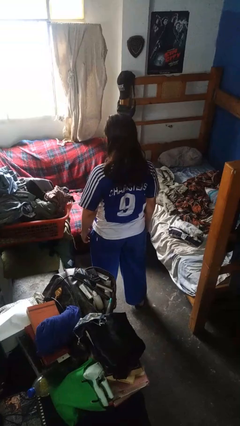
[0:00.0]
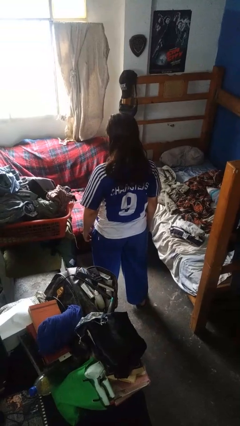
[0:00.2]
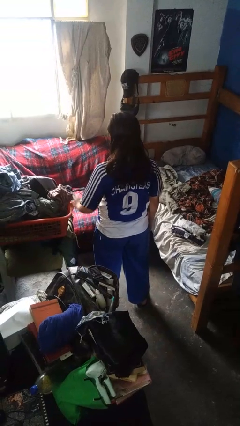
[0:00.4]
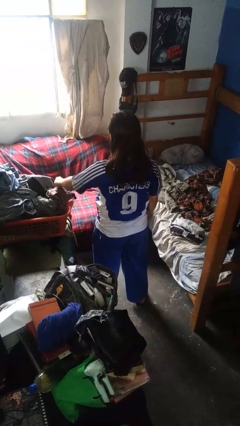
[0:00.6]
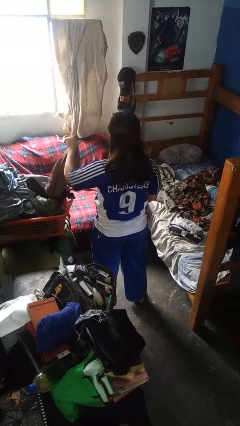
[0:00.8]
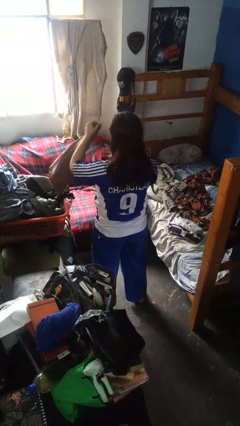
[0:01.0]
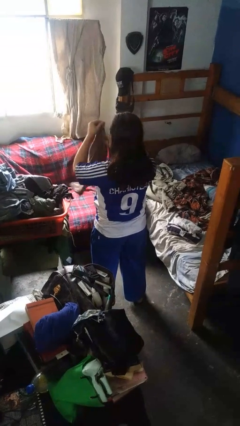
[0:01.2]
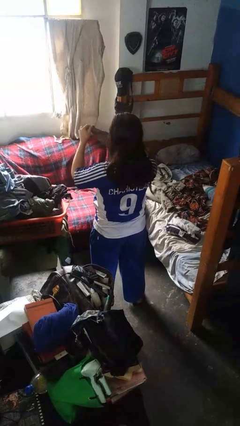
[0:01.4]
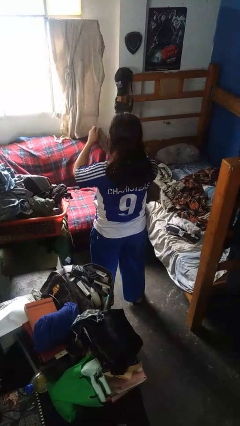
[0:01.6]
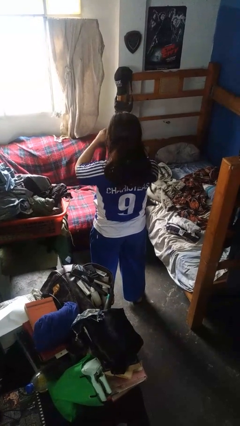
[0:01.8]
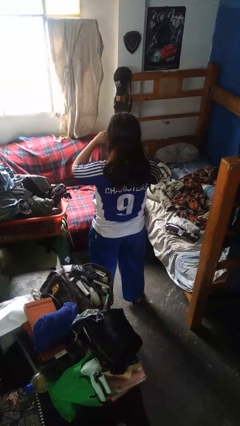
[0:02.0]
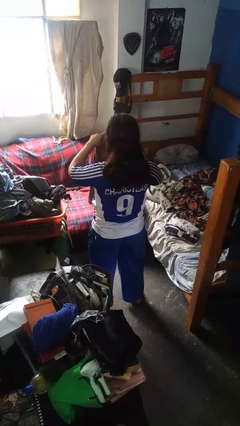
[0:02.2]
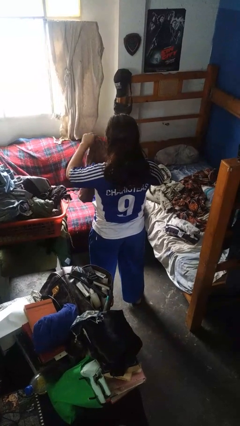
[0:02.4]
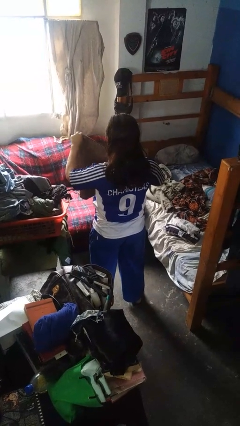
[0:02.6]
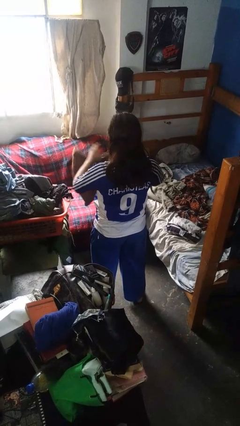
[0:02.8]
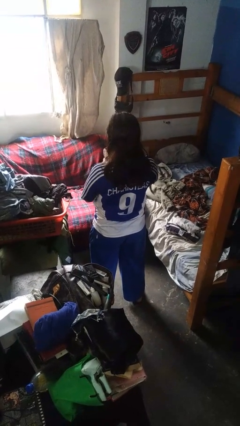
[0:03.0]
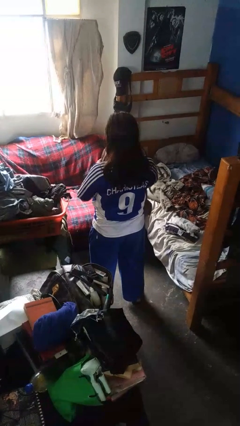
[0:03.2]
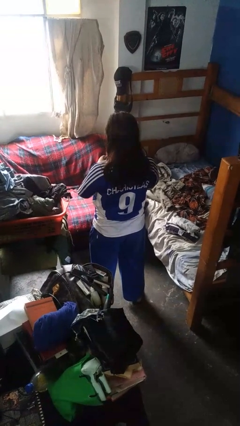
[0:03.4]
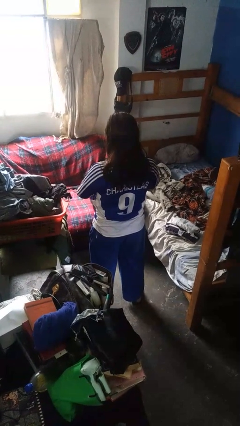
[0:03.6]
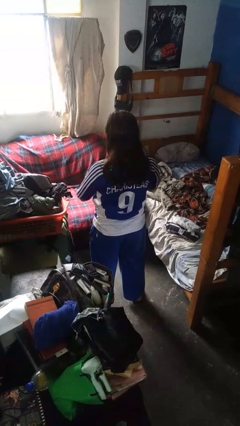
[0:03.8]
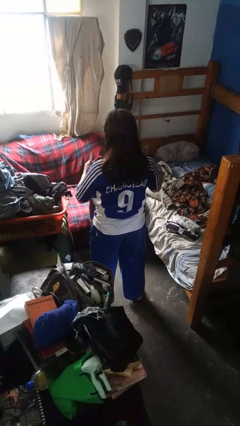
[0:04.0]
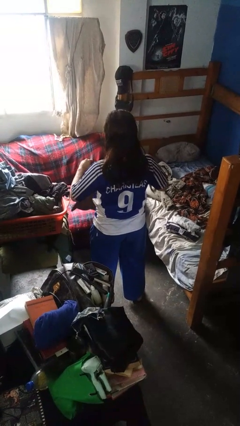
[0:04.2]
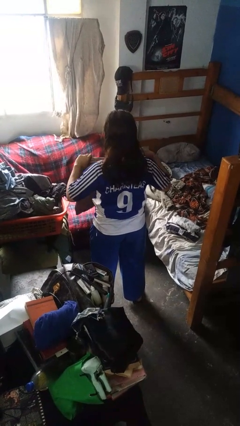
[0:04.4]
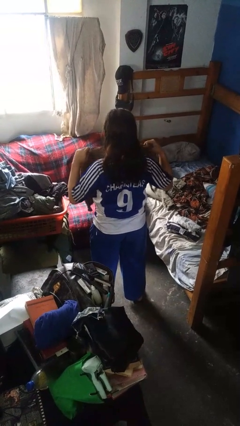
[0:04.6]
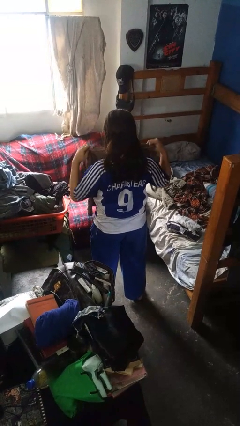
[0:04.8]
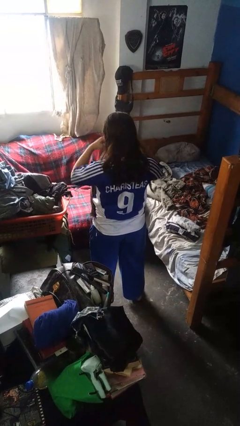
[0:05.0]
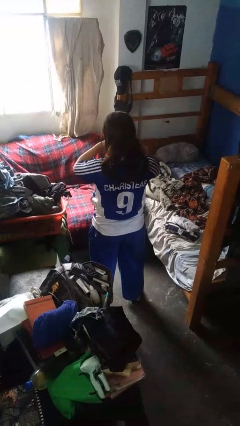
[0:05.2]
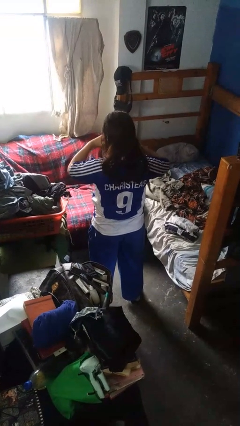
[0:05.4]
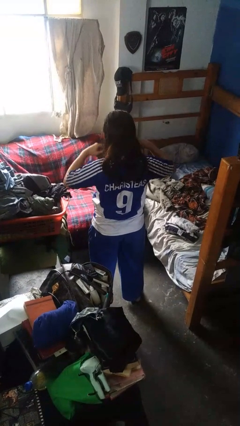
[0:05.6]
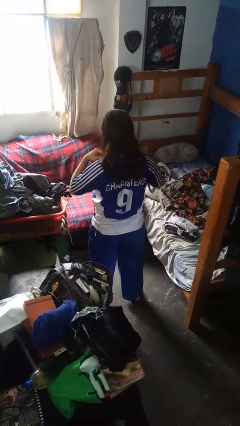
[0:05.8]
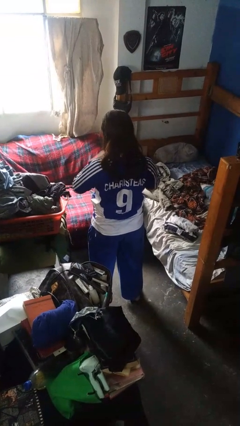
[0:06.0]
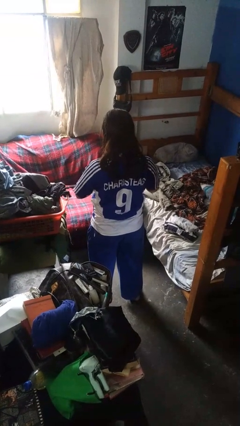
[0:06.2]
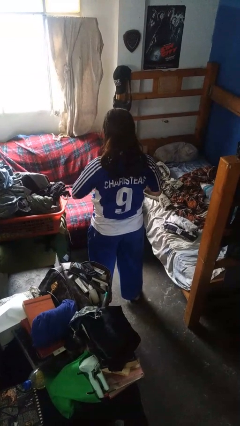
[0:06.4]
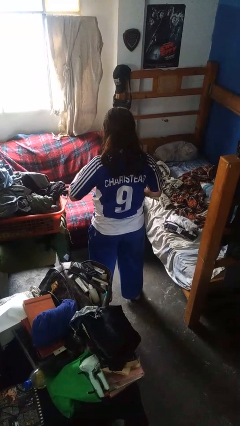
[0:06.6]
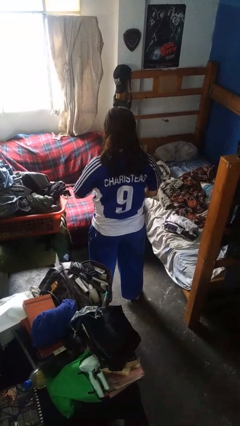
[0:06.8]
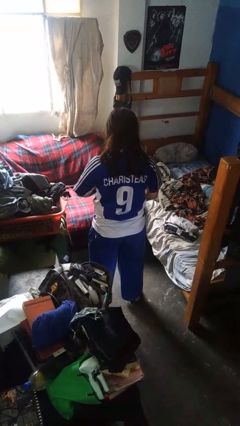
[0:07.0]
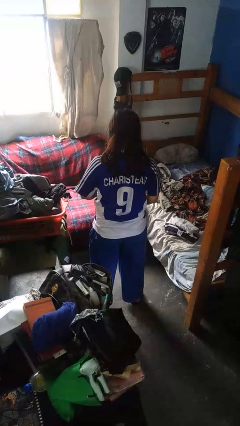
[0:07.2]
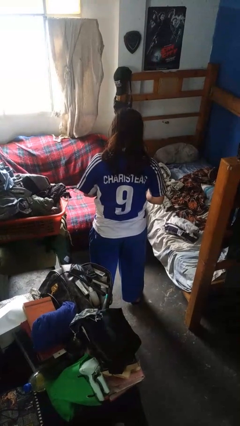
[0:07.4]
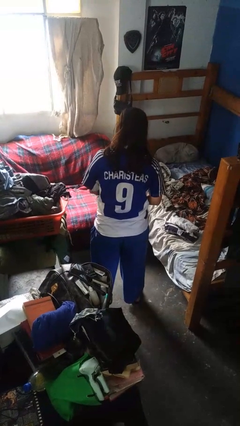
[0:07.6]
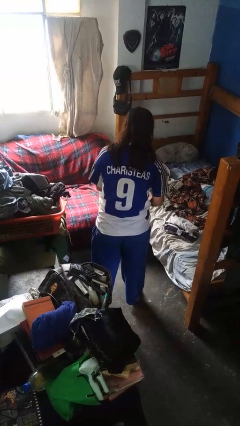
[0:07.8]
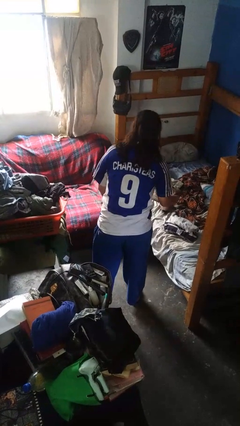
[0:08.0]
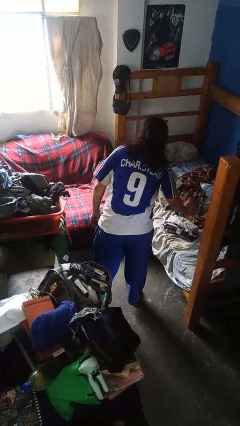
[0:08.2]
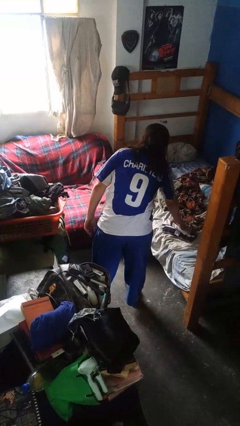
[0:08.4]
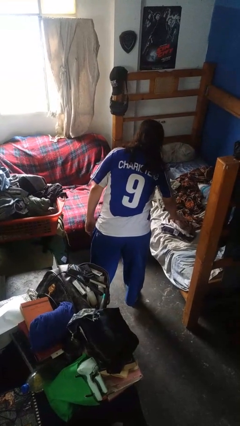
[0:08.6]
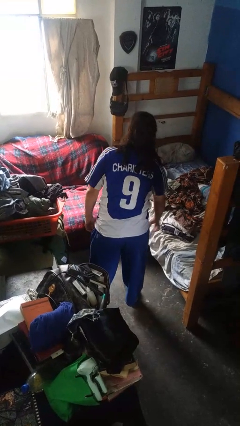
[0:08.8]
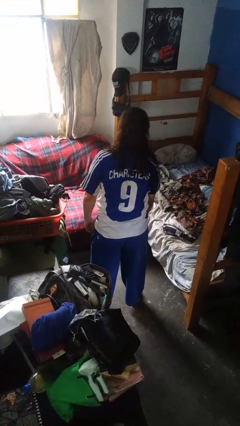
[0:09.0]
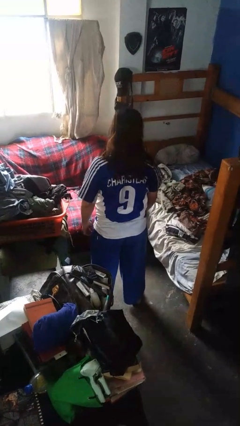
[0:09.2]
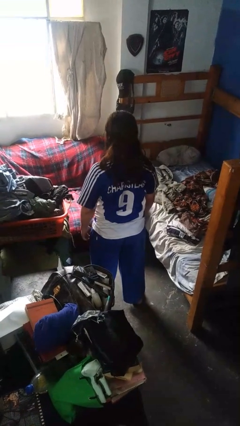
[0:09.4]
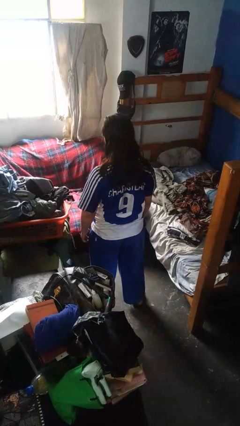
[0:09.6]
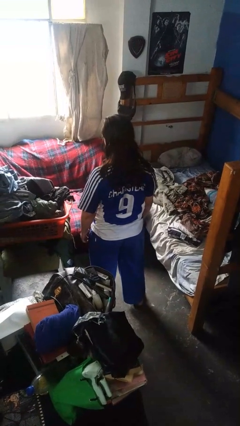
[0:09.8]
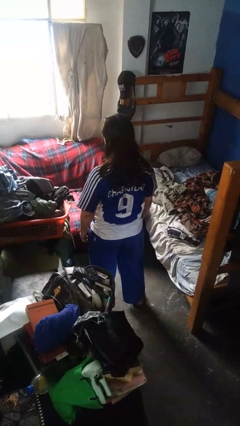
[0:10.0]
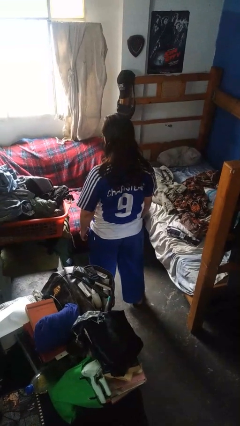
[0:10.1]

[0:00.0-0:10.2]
person folds shirt

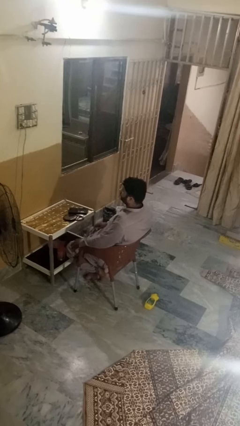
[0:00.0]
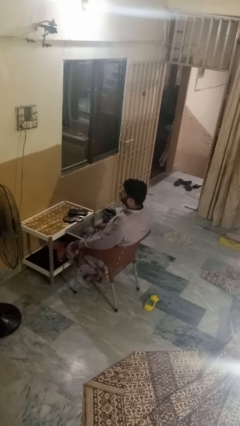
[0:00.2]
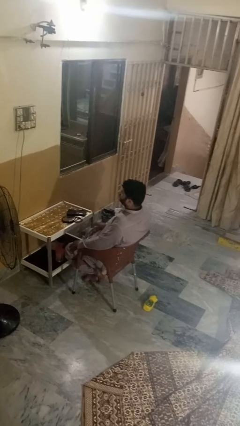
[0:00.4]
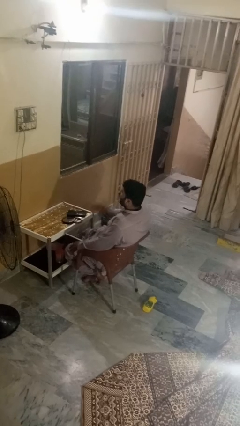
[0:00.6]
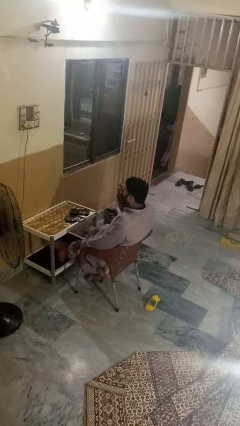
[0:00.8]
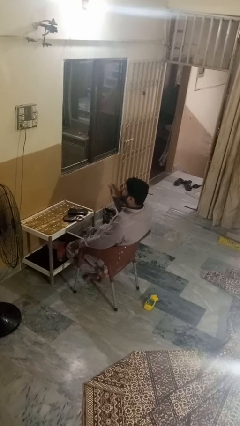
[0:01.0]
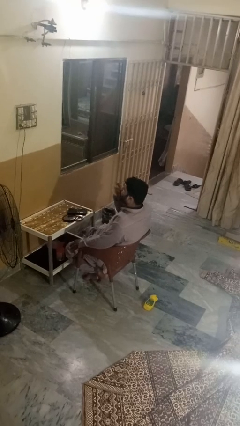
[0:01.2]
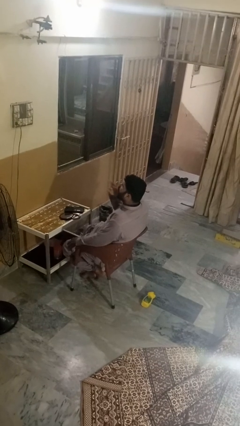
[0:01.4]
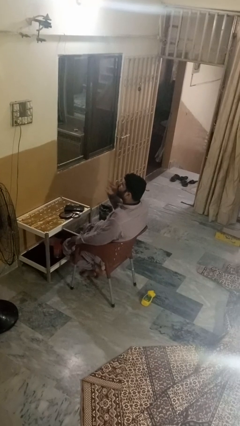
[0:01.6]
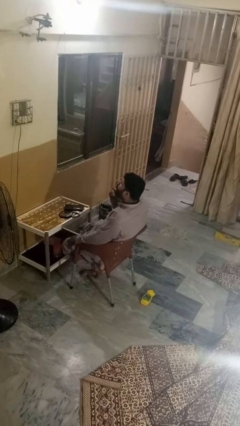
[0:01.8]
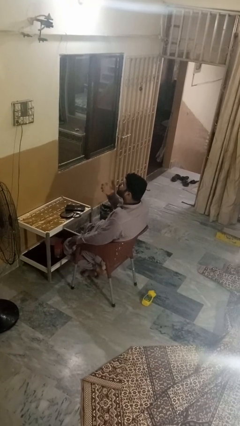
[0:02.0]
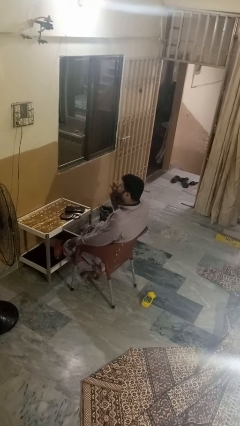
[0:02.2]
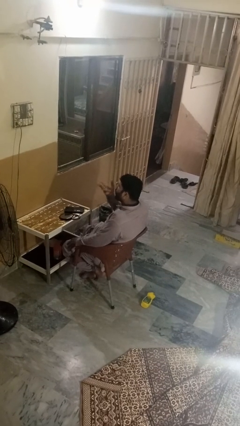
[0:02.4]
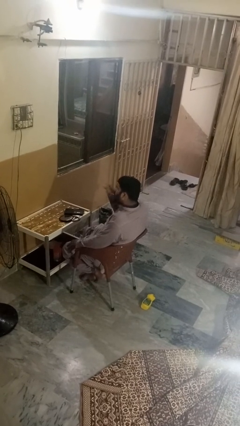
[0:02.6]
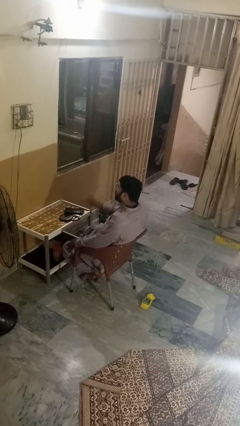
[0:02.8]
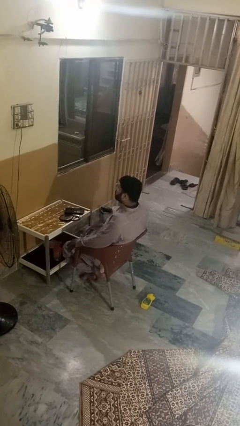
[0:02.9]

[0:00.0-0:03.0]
person licks fingers

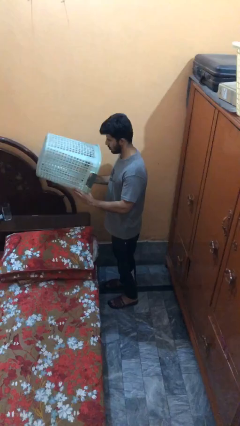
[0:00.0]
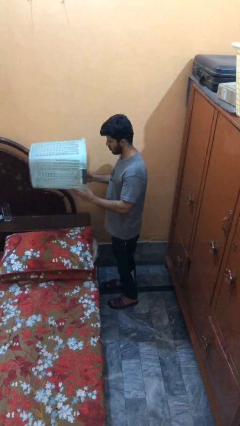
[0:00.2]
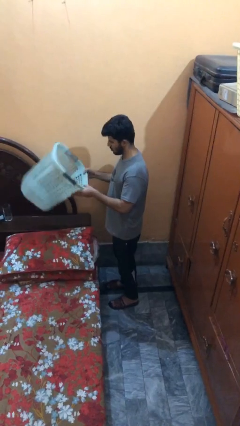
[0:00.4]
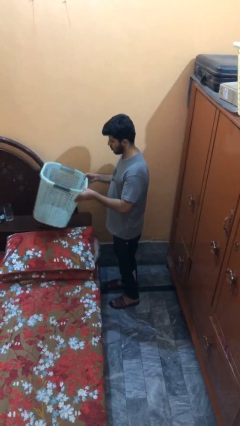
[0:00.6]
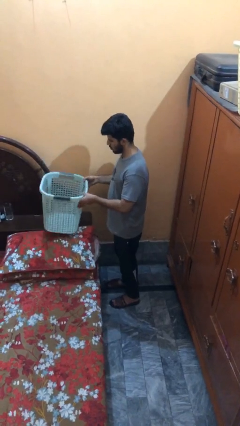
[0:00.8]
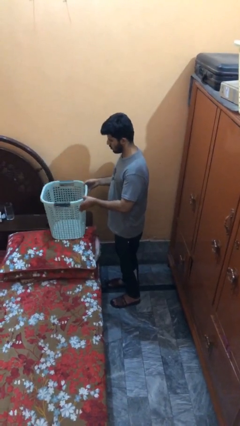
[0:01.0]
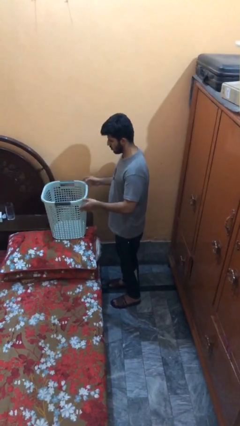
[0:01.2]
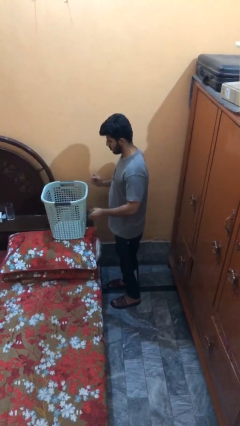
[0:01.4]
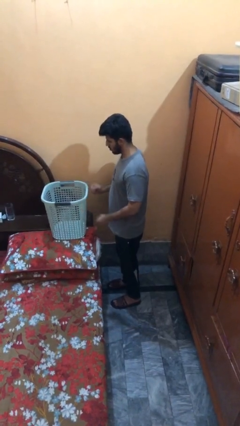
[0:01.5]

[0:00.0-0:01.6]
person puts down object on bed

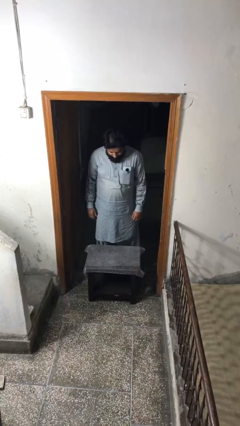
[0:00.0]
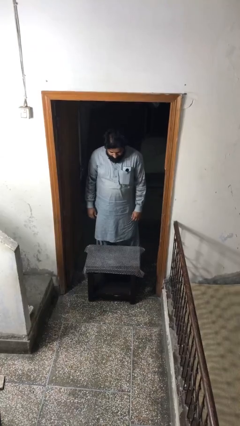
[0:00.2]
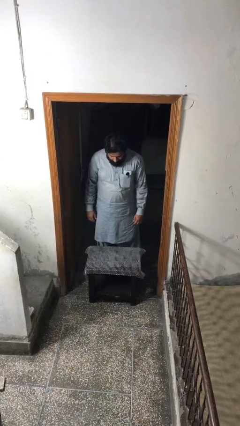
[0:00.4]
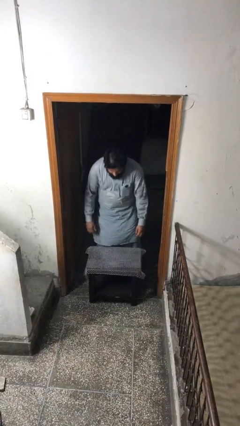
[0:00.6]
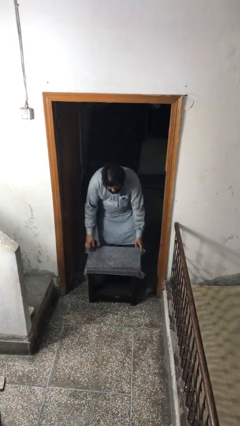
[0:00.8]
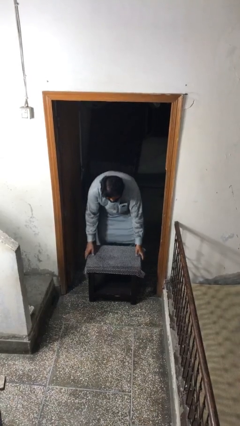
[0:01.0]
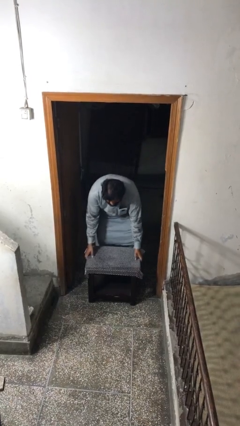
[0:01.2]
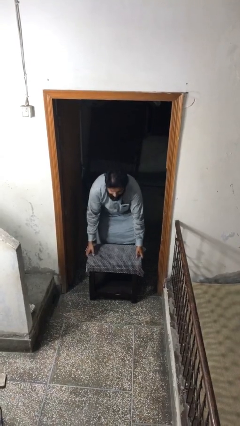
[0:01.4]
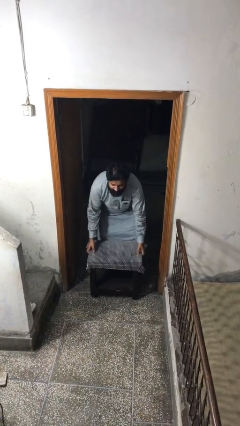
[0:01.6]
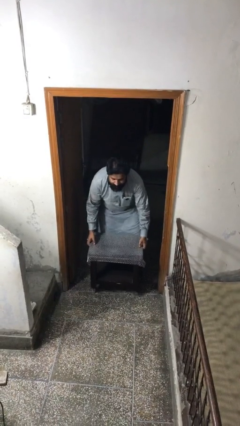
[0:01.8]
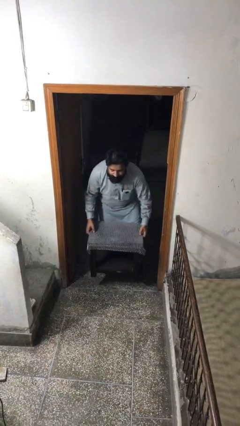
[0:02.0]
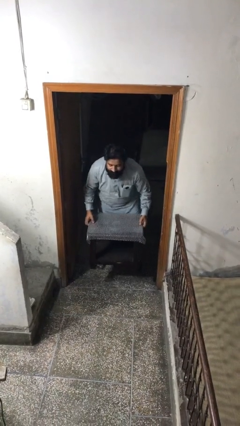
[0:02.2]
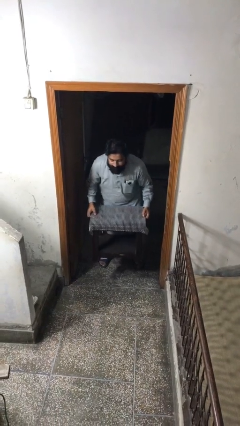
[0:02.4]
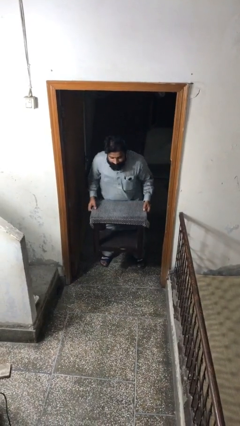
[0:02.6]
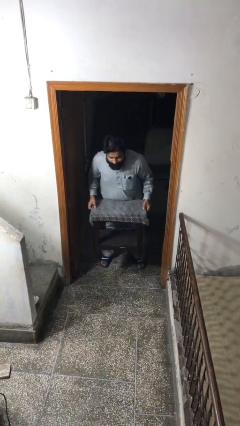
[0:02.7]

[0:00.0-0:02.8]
person picks up object from floor

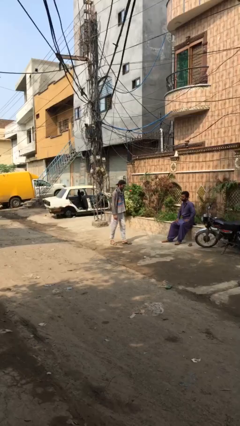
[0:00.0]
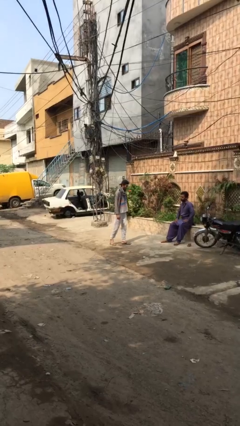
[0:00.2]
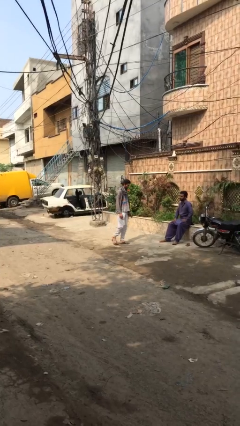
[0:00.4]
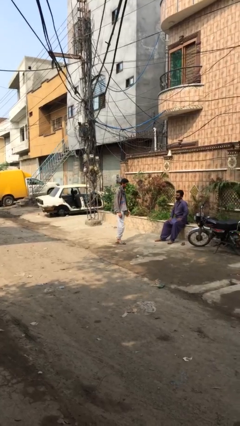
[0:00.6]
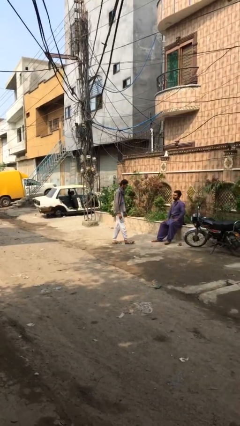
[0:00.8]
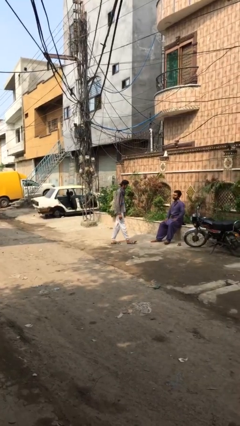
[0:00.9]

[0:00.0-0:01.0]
person embraces person
